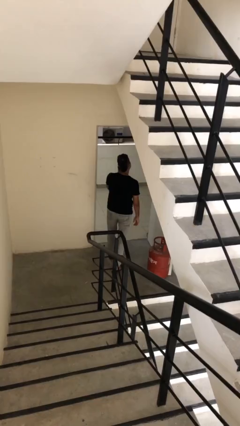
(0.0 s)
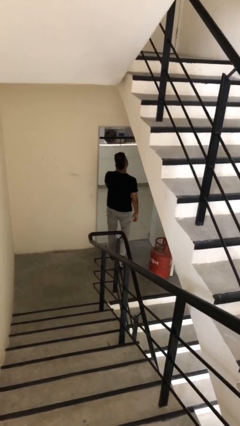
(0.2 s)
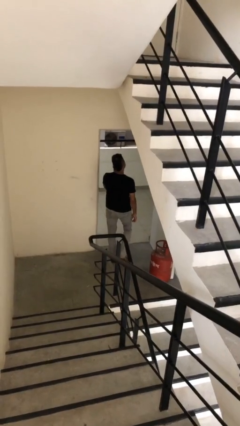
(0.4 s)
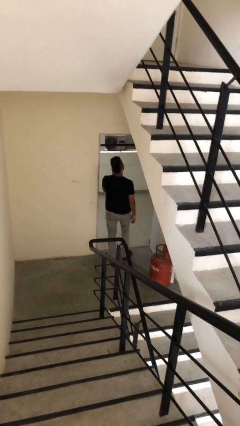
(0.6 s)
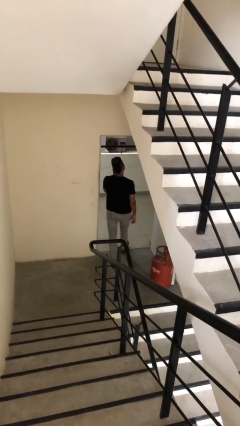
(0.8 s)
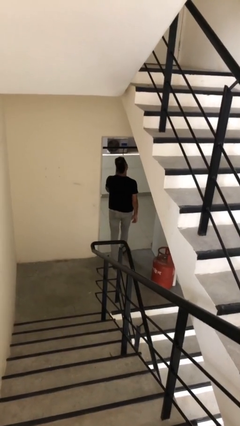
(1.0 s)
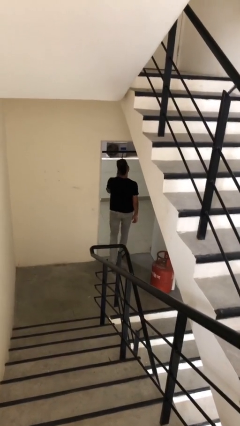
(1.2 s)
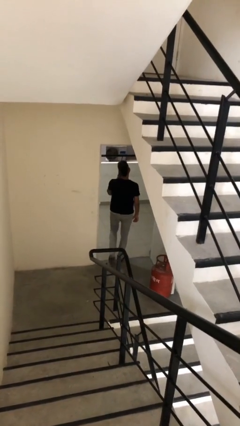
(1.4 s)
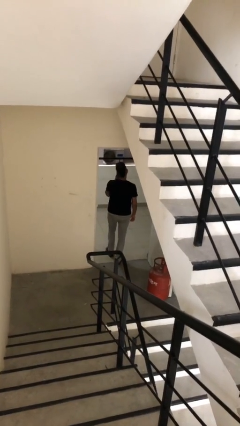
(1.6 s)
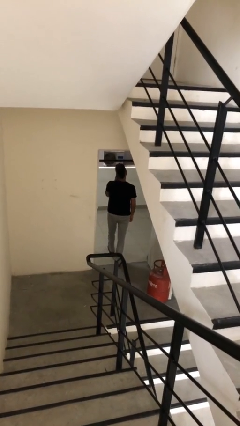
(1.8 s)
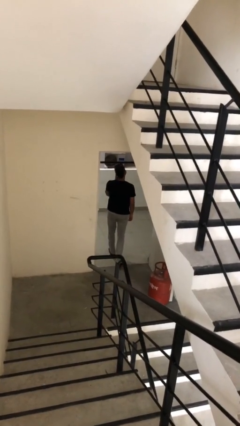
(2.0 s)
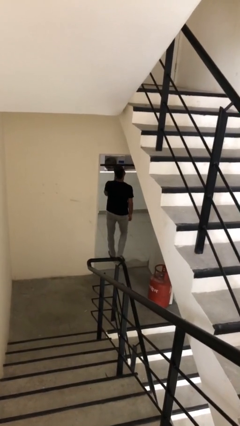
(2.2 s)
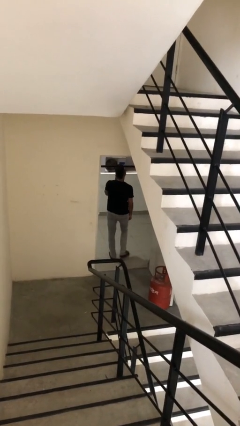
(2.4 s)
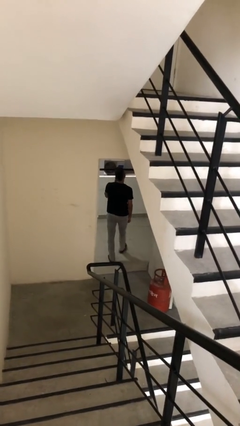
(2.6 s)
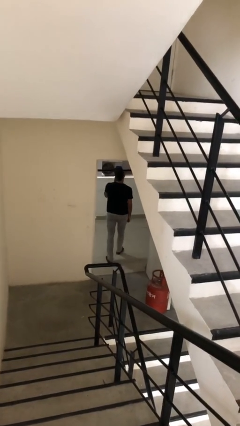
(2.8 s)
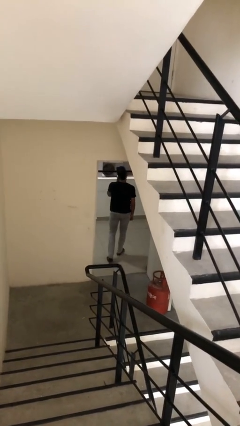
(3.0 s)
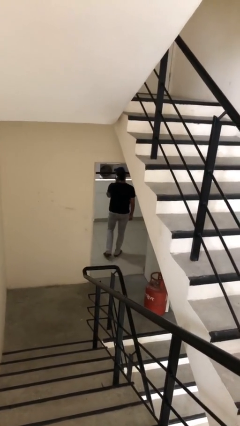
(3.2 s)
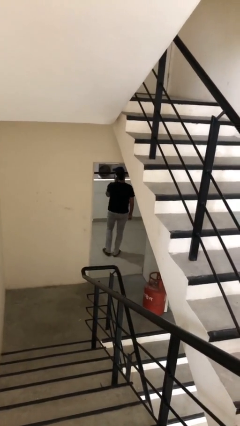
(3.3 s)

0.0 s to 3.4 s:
person exits scene through structure

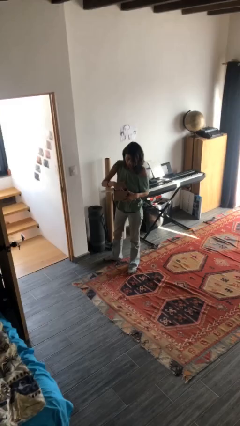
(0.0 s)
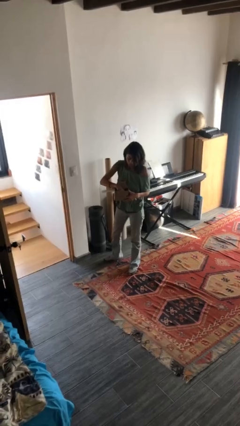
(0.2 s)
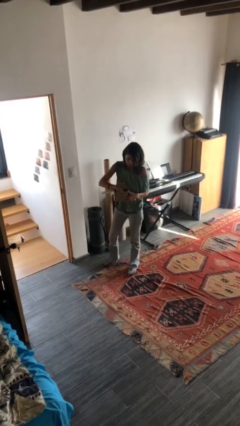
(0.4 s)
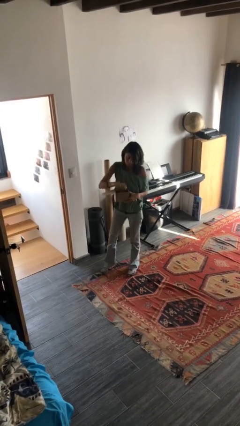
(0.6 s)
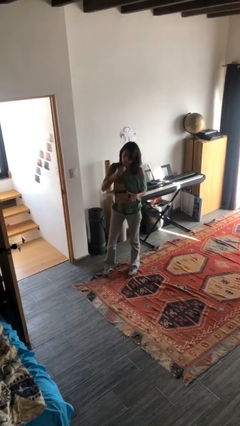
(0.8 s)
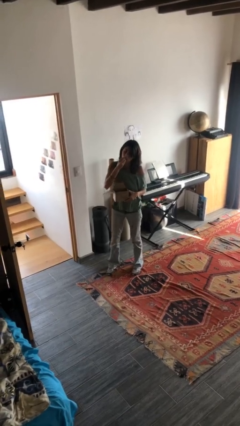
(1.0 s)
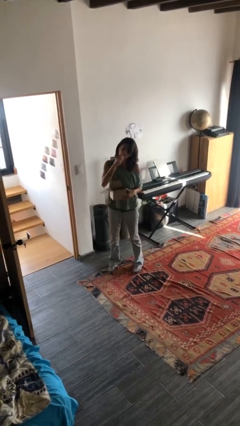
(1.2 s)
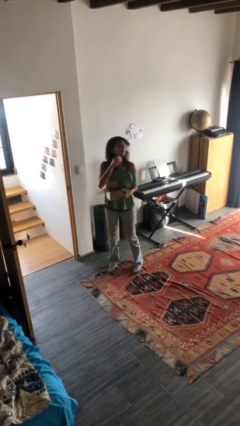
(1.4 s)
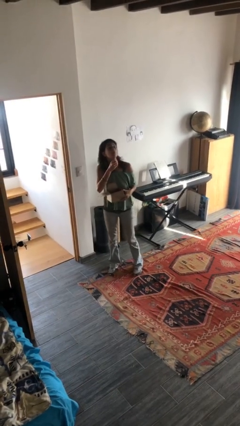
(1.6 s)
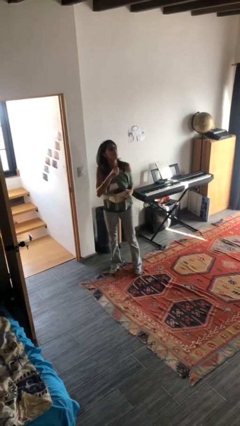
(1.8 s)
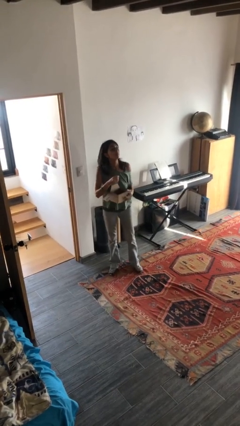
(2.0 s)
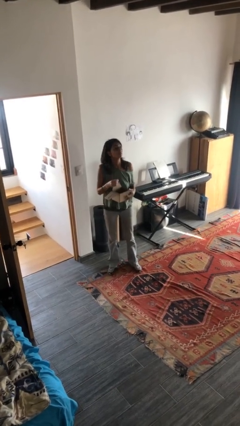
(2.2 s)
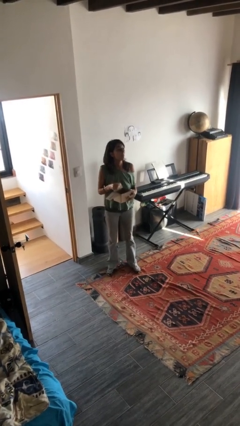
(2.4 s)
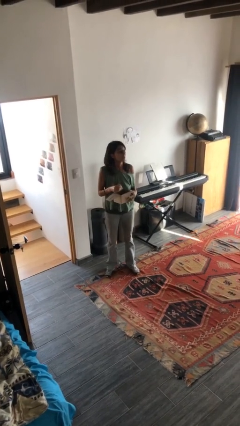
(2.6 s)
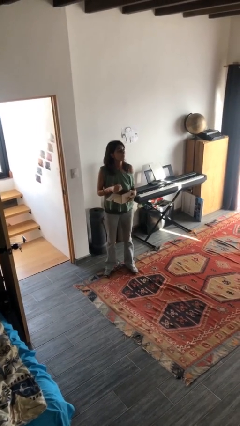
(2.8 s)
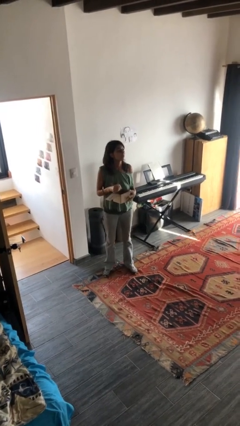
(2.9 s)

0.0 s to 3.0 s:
person eats snack from bag

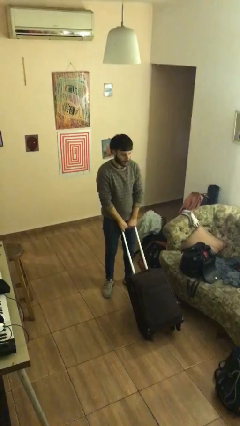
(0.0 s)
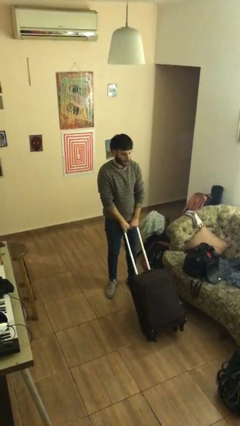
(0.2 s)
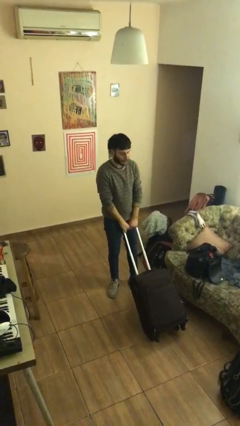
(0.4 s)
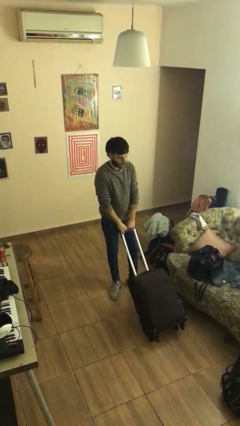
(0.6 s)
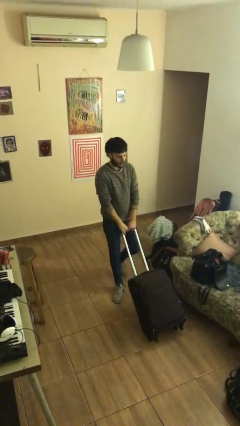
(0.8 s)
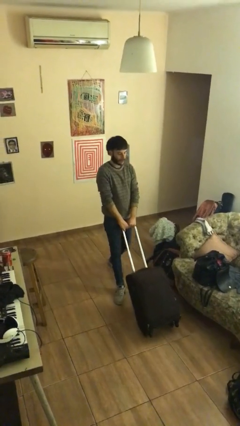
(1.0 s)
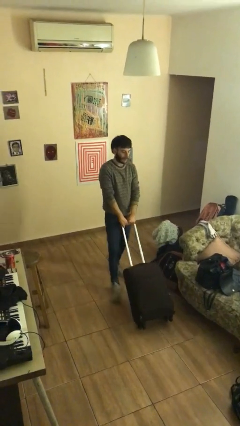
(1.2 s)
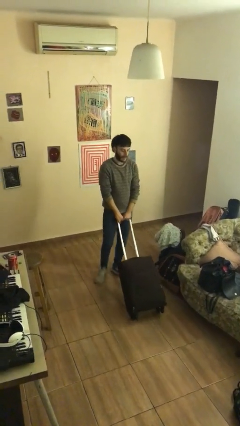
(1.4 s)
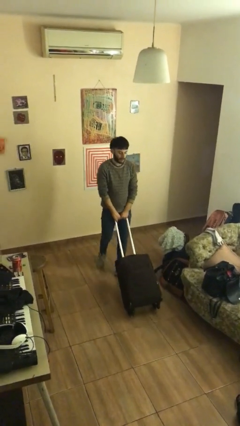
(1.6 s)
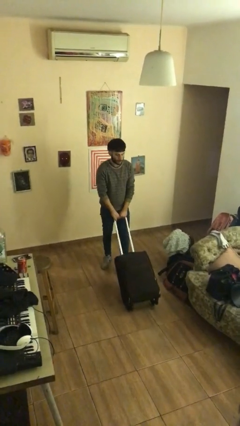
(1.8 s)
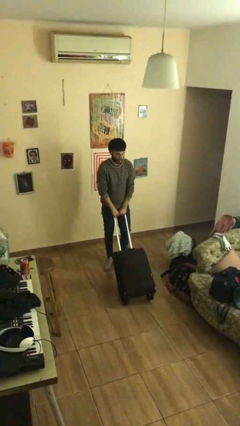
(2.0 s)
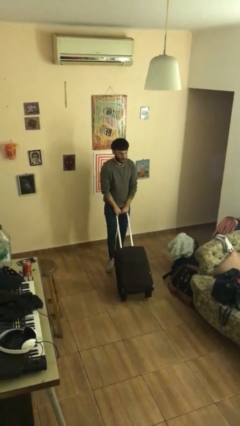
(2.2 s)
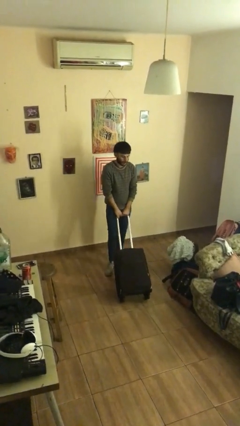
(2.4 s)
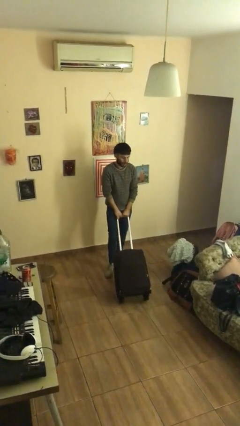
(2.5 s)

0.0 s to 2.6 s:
person pulls wheeled cart

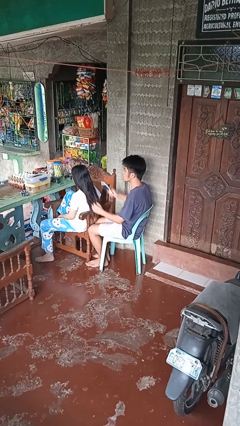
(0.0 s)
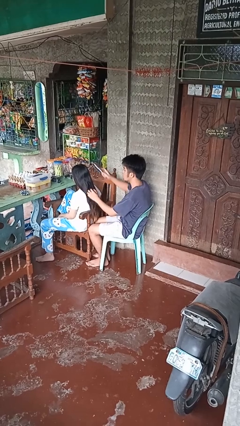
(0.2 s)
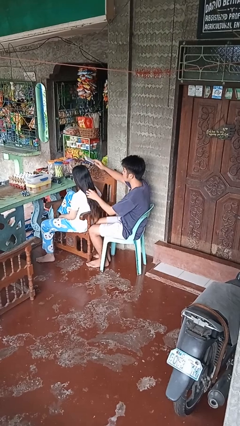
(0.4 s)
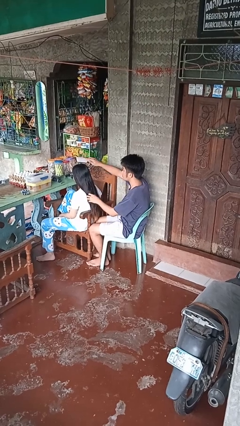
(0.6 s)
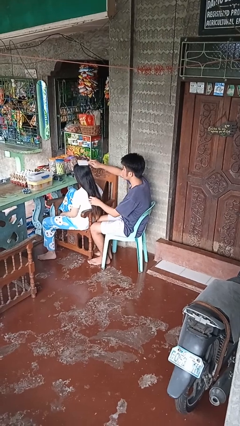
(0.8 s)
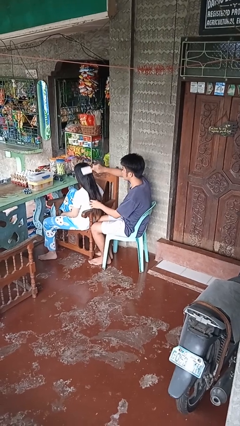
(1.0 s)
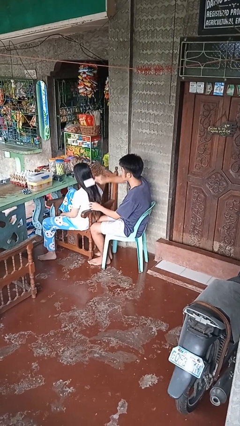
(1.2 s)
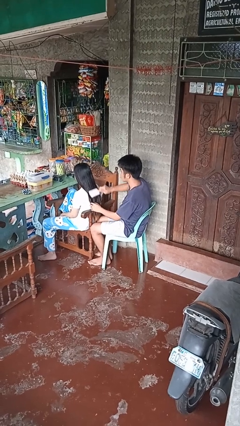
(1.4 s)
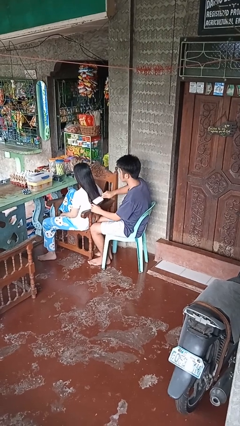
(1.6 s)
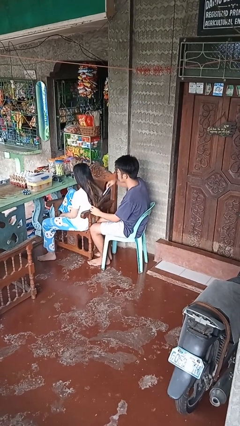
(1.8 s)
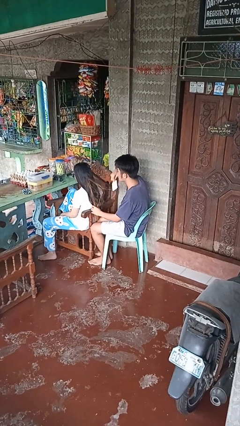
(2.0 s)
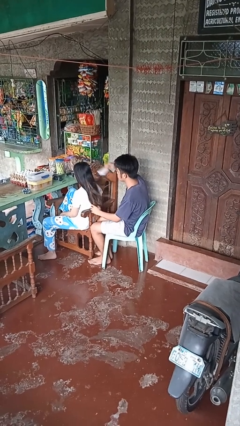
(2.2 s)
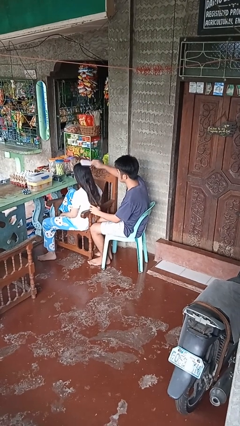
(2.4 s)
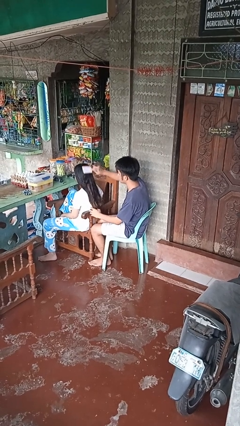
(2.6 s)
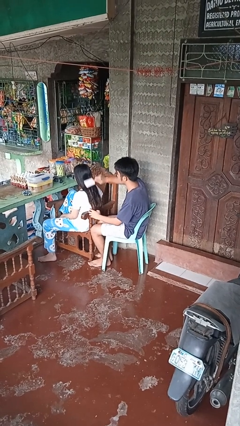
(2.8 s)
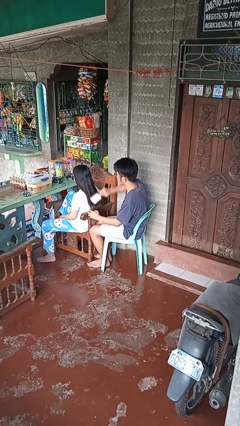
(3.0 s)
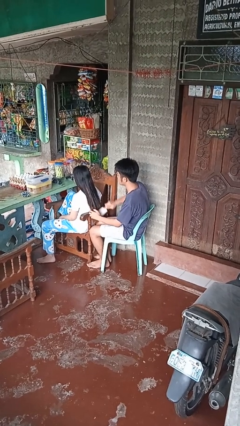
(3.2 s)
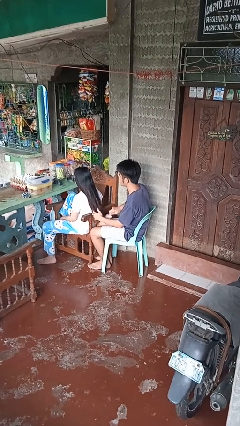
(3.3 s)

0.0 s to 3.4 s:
person brushes hair of person

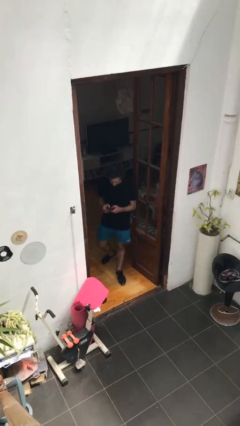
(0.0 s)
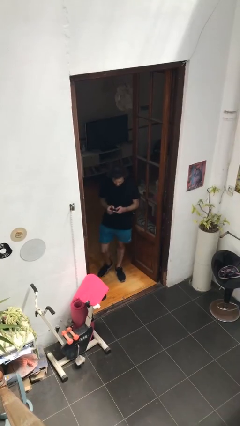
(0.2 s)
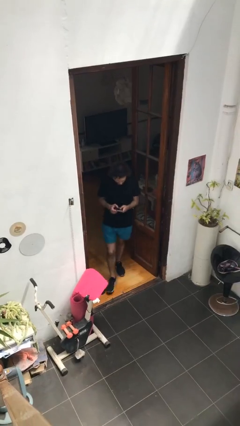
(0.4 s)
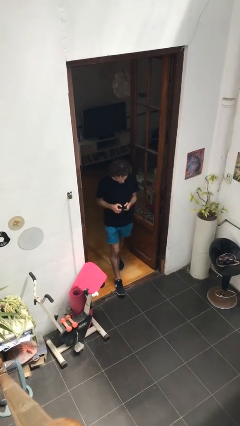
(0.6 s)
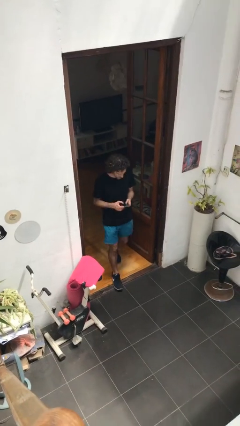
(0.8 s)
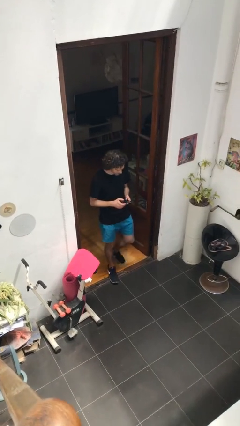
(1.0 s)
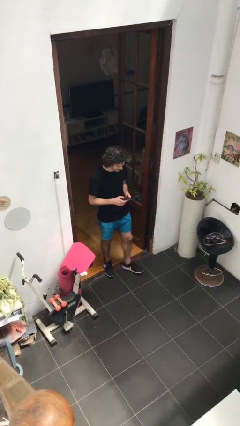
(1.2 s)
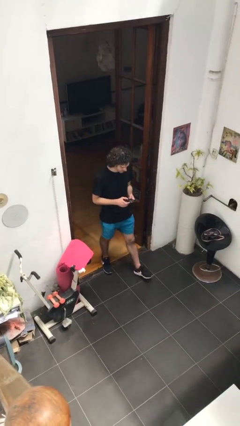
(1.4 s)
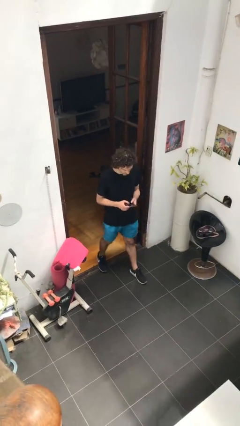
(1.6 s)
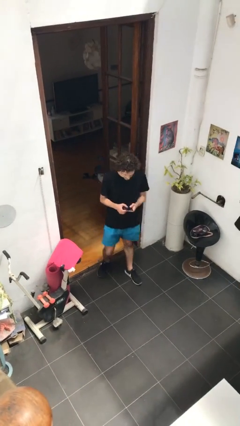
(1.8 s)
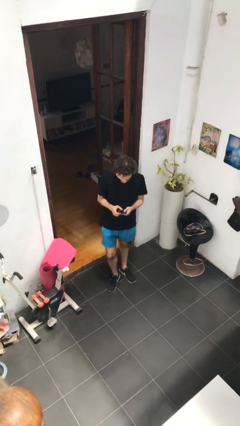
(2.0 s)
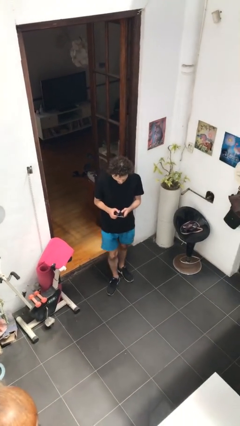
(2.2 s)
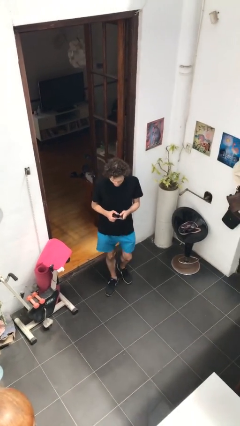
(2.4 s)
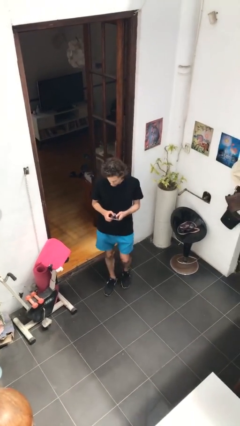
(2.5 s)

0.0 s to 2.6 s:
person enters scene through structure

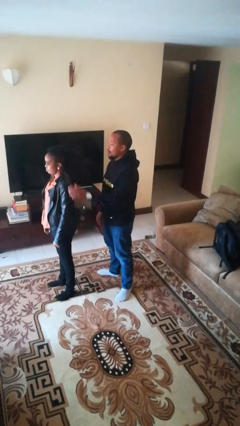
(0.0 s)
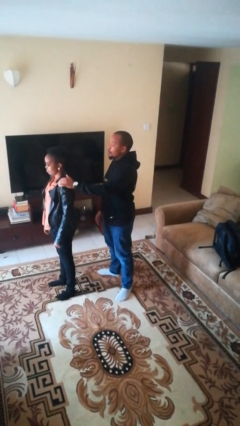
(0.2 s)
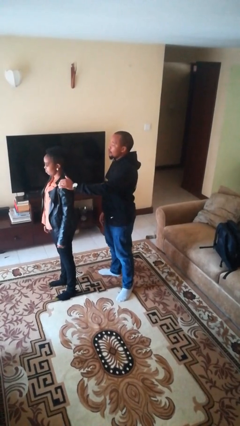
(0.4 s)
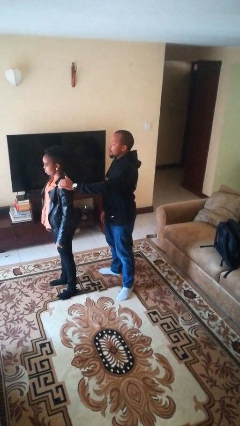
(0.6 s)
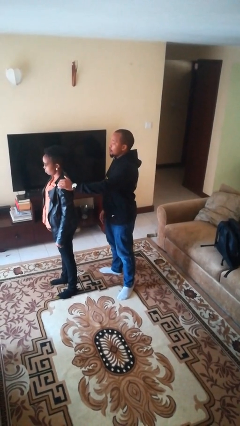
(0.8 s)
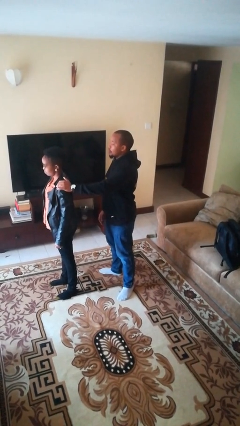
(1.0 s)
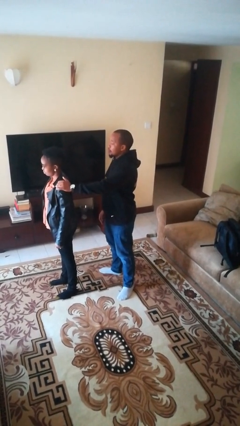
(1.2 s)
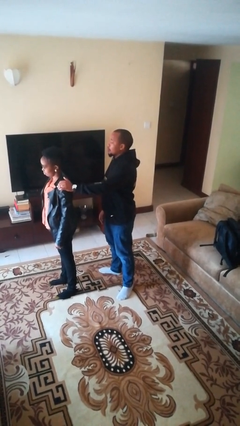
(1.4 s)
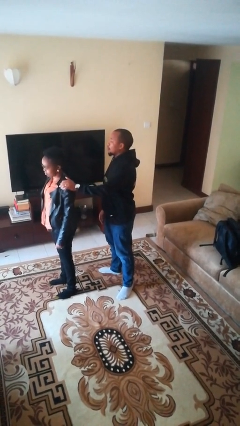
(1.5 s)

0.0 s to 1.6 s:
person grabs person by shoulder

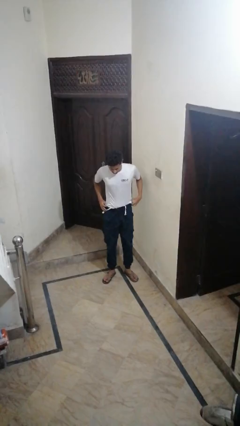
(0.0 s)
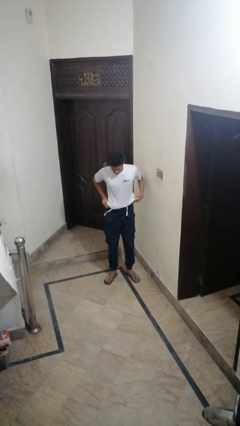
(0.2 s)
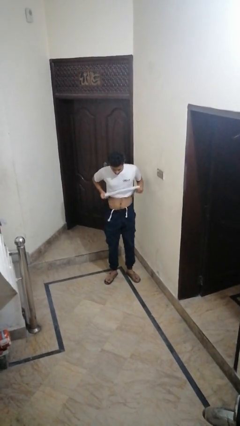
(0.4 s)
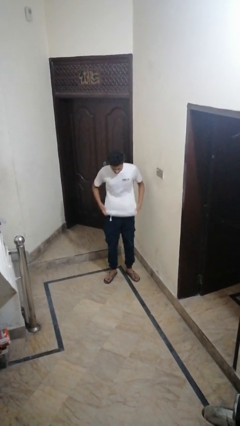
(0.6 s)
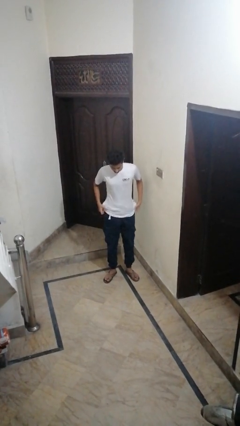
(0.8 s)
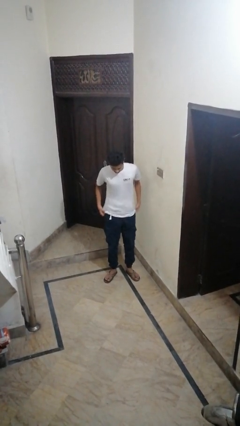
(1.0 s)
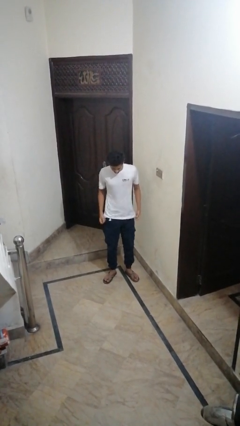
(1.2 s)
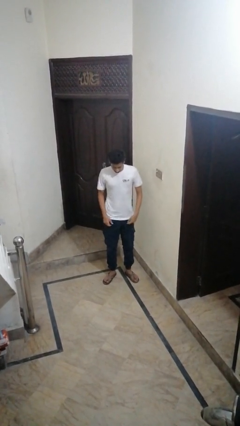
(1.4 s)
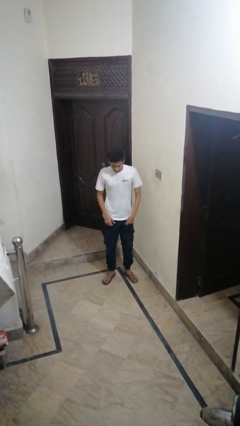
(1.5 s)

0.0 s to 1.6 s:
person untucks shirt
